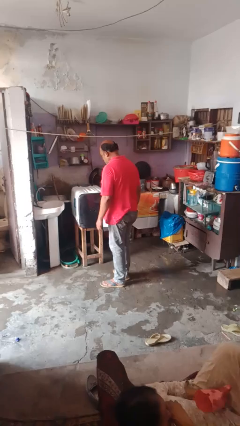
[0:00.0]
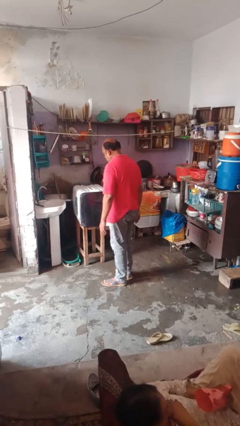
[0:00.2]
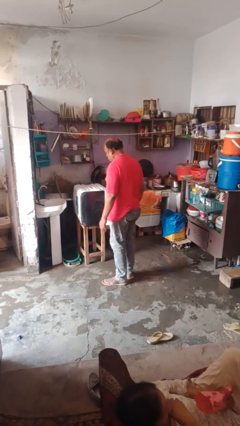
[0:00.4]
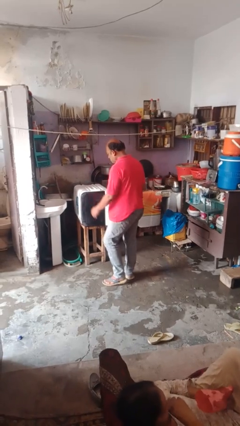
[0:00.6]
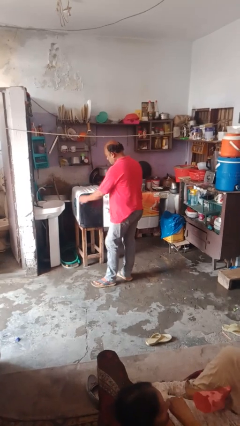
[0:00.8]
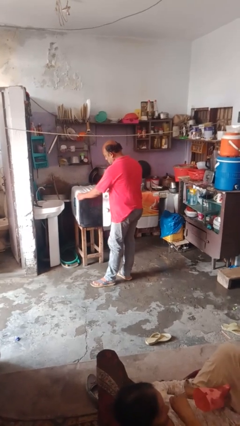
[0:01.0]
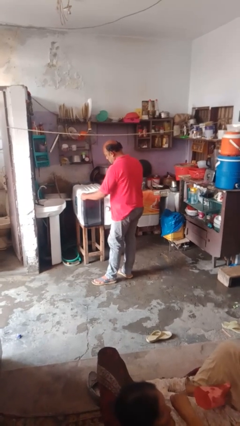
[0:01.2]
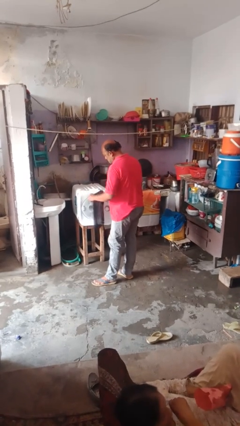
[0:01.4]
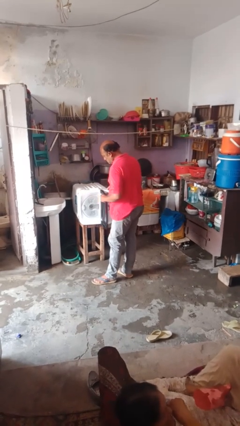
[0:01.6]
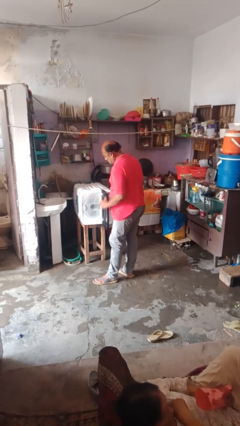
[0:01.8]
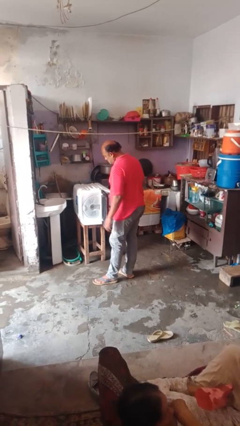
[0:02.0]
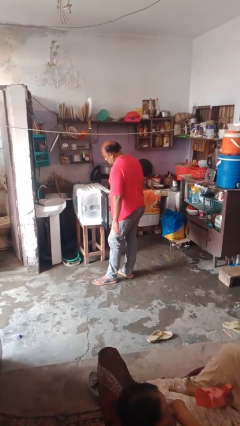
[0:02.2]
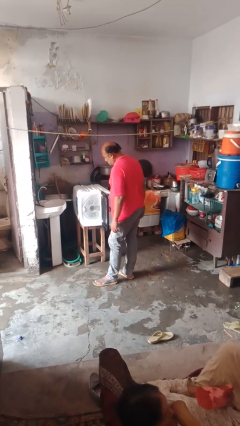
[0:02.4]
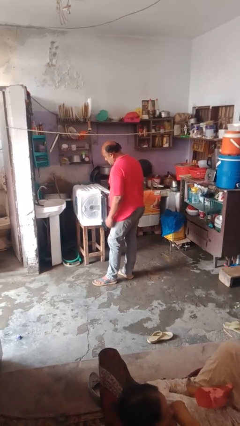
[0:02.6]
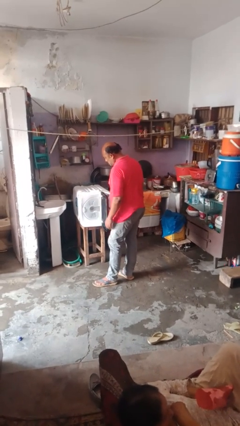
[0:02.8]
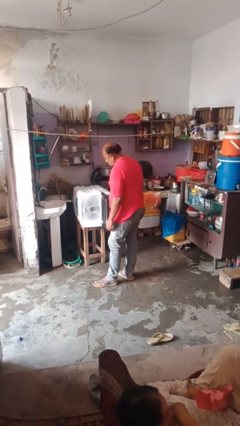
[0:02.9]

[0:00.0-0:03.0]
person opens dishwasher

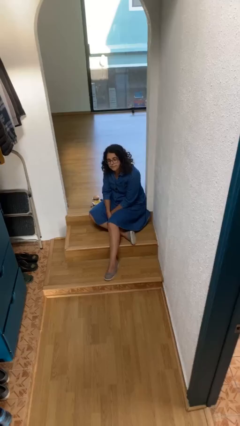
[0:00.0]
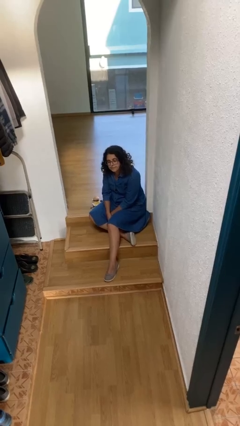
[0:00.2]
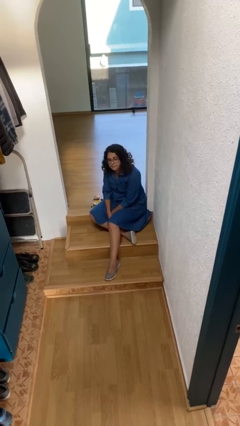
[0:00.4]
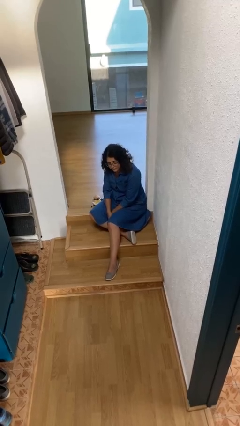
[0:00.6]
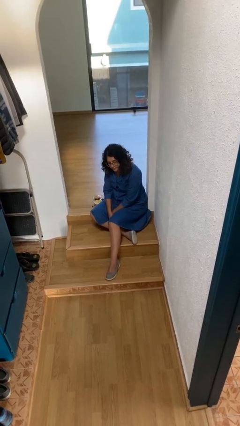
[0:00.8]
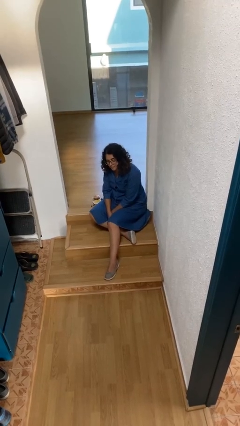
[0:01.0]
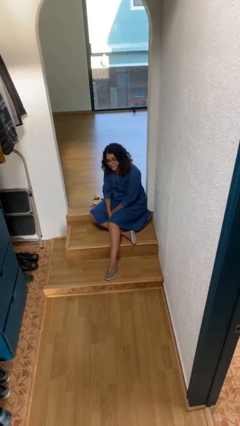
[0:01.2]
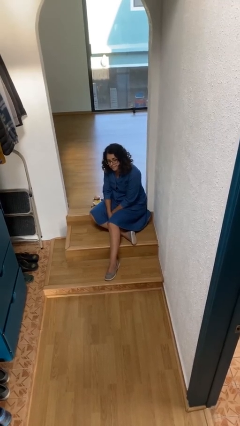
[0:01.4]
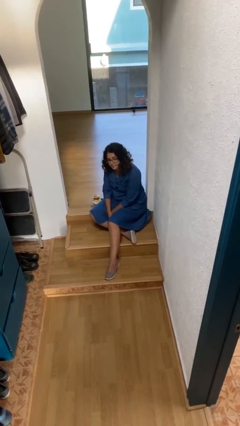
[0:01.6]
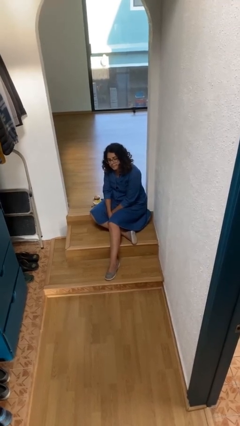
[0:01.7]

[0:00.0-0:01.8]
person nods head

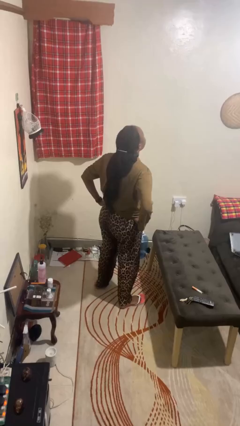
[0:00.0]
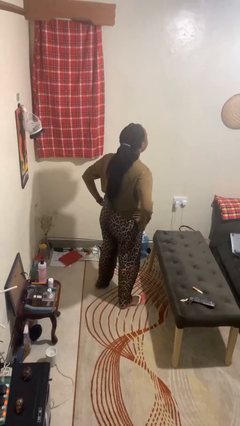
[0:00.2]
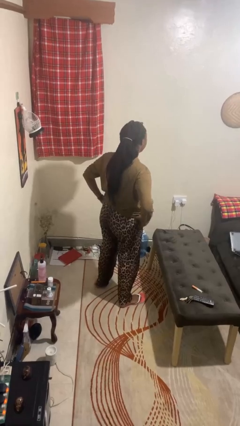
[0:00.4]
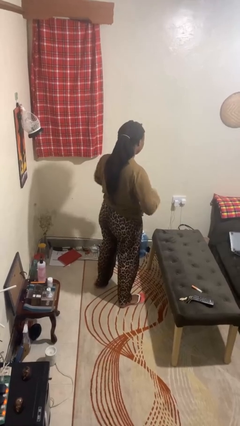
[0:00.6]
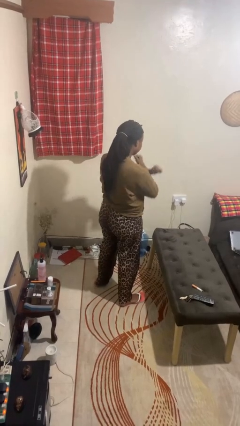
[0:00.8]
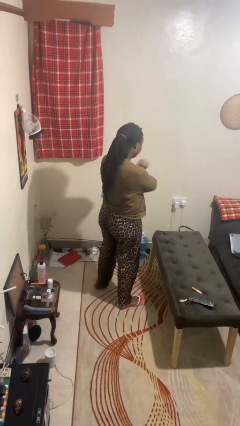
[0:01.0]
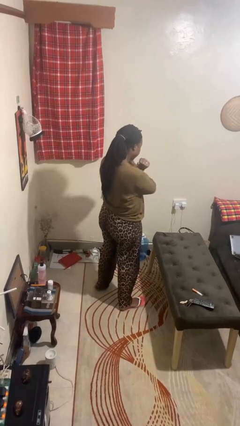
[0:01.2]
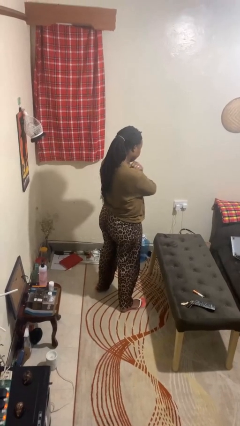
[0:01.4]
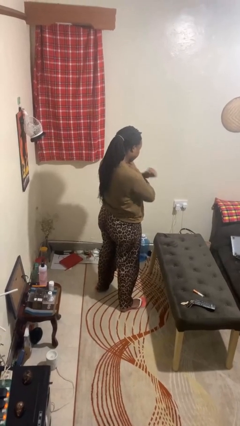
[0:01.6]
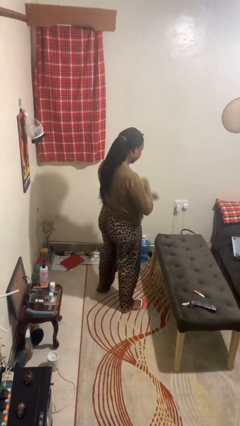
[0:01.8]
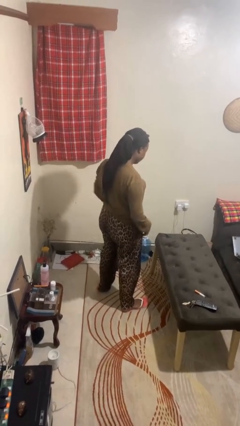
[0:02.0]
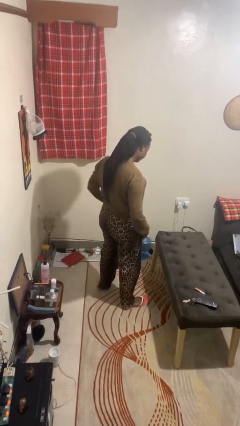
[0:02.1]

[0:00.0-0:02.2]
person gestures arms x

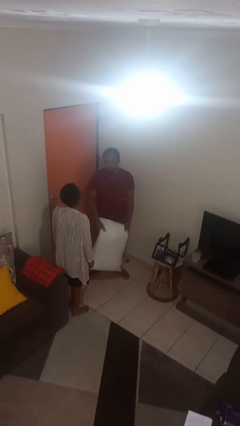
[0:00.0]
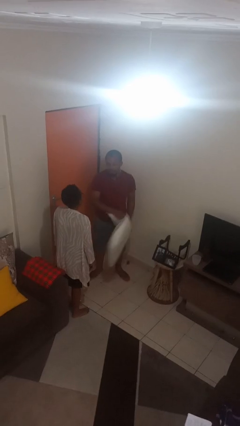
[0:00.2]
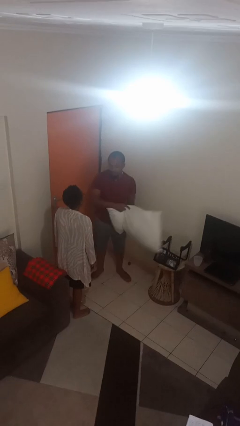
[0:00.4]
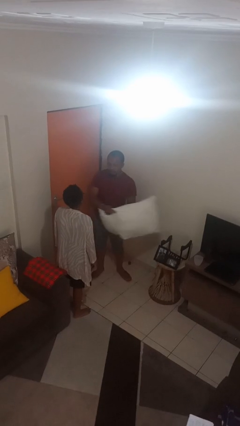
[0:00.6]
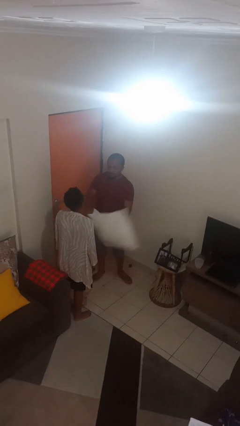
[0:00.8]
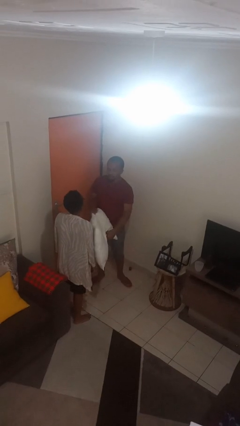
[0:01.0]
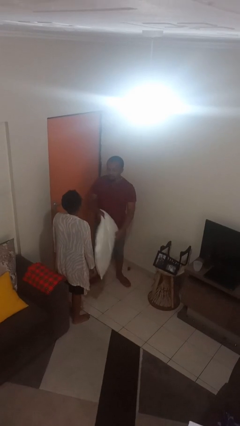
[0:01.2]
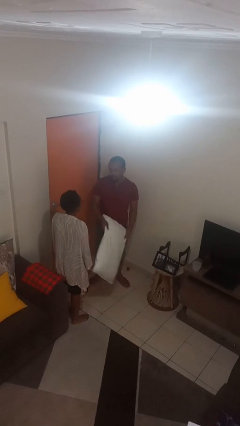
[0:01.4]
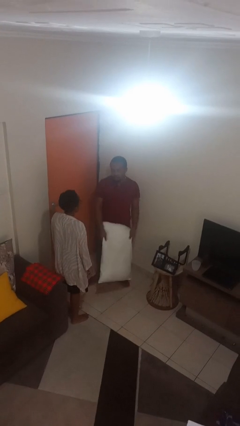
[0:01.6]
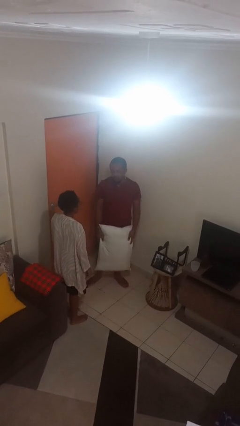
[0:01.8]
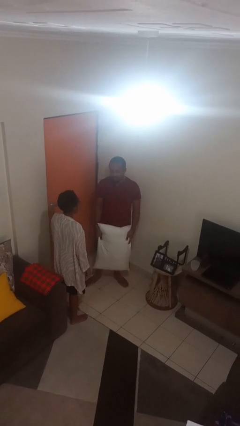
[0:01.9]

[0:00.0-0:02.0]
person hits person with pillow

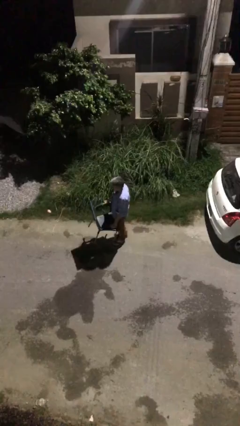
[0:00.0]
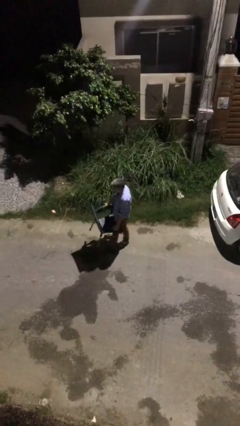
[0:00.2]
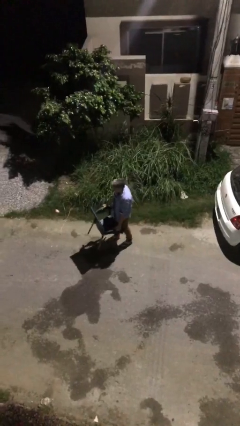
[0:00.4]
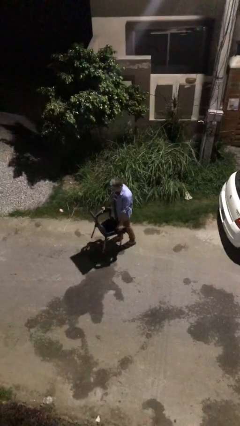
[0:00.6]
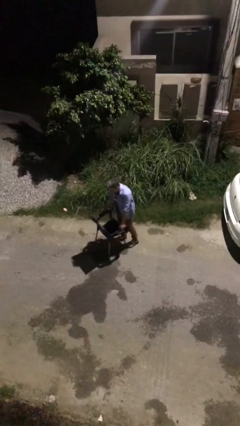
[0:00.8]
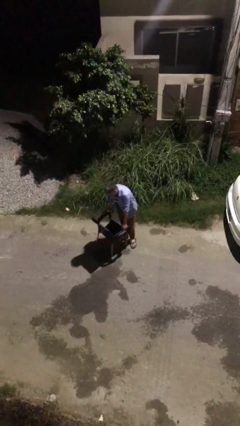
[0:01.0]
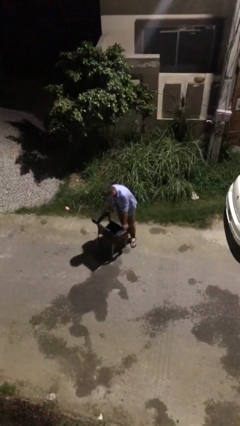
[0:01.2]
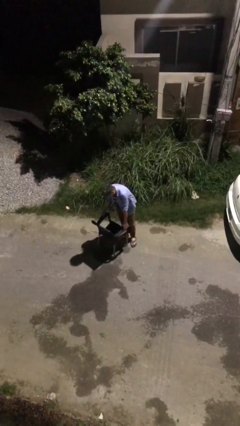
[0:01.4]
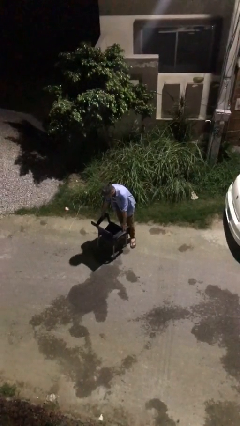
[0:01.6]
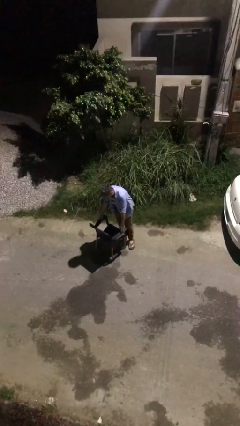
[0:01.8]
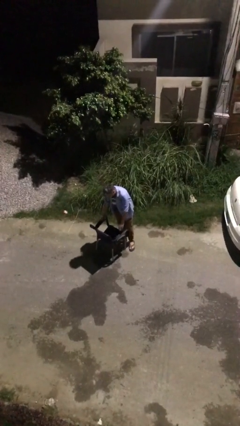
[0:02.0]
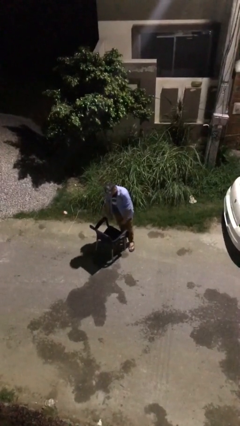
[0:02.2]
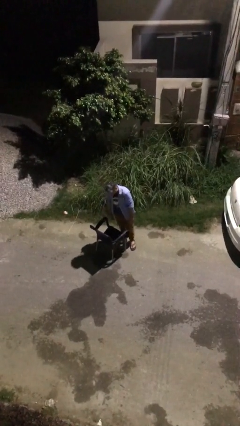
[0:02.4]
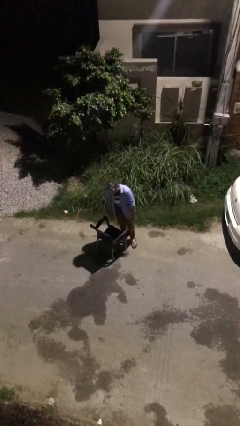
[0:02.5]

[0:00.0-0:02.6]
person puts down object on floor

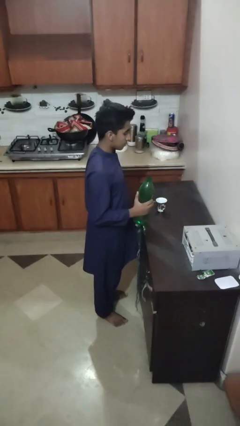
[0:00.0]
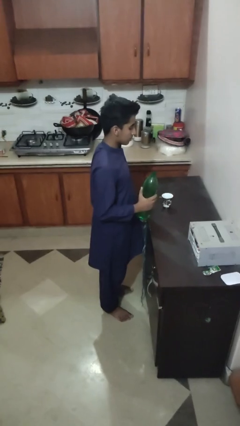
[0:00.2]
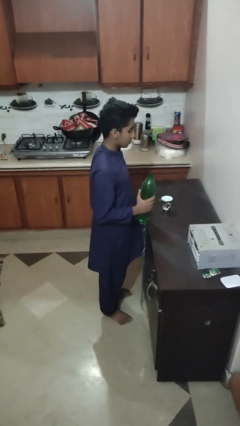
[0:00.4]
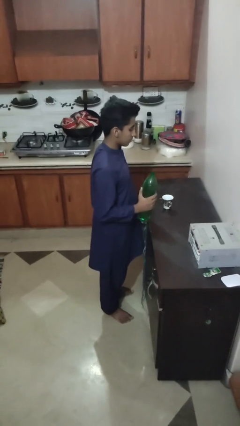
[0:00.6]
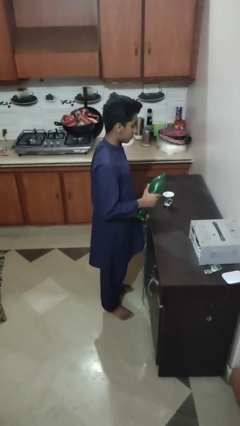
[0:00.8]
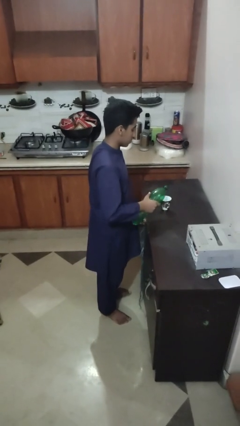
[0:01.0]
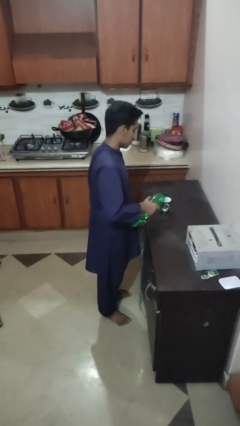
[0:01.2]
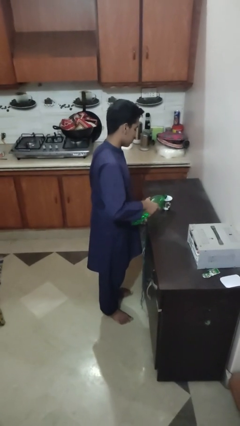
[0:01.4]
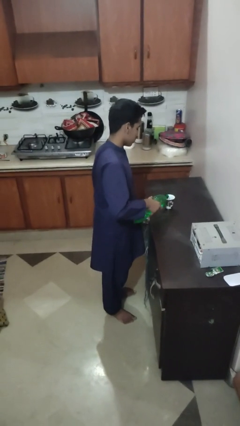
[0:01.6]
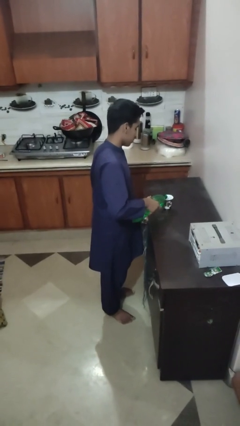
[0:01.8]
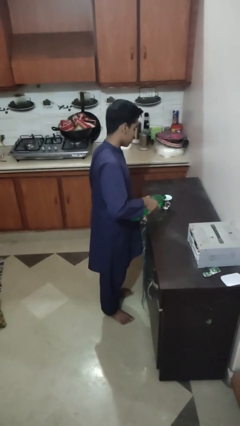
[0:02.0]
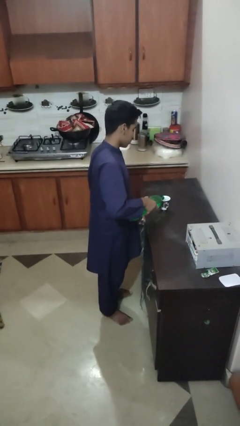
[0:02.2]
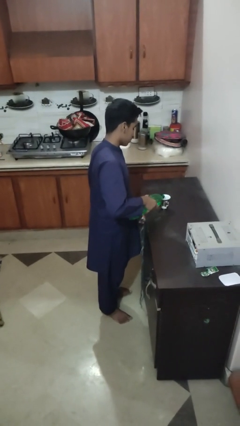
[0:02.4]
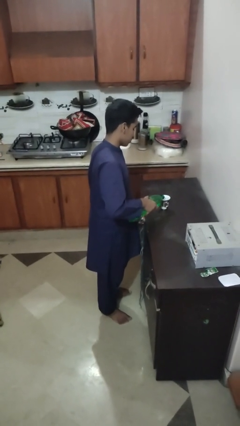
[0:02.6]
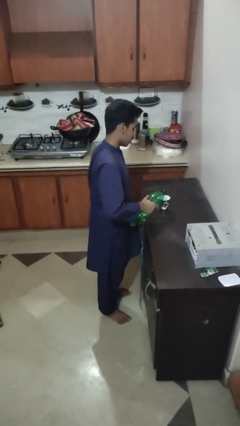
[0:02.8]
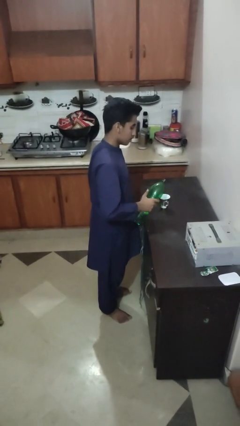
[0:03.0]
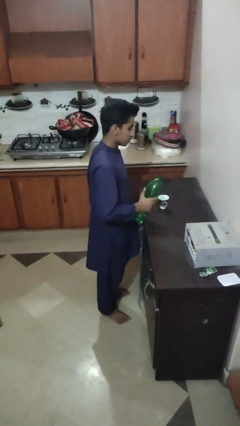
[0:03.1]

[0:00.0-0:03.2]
person pours liquid into cup

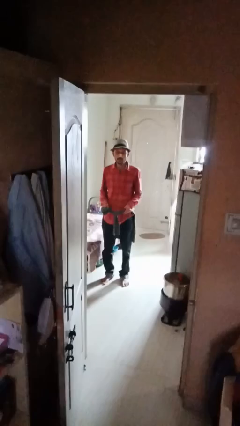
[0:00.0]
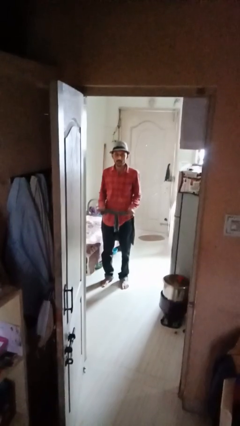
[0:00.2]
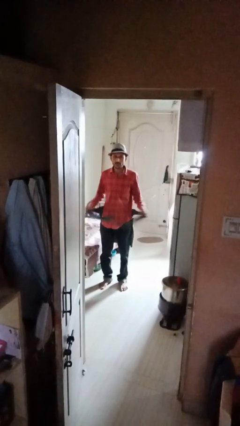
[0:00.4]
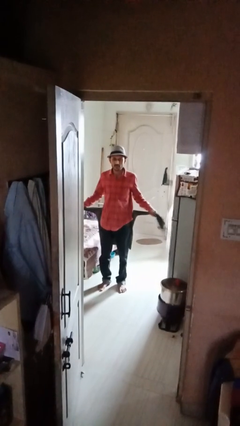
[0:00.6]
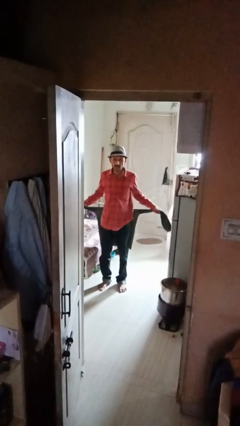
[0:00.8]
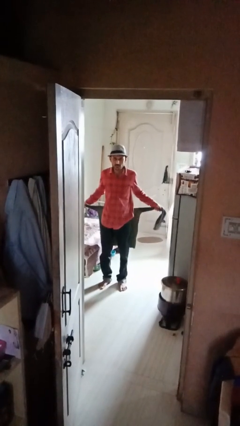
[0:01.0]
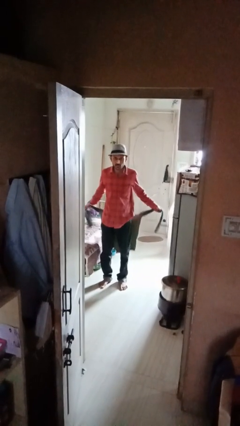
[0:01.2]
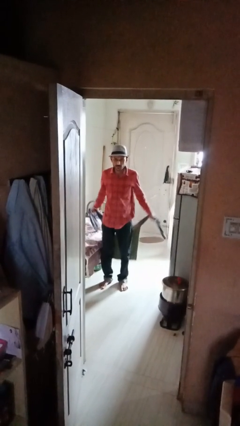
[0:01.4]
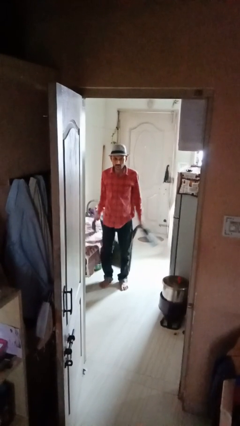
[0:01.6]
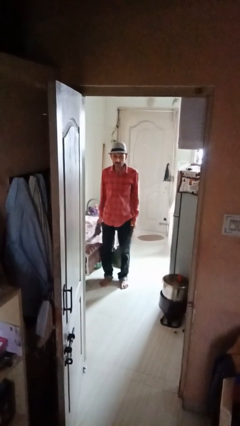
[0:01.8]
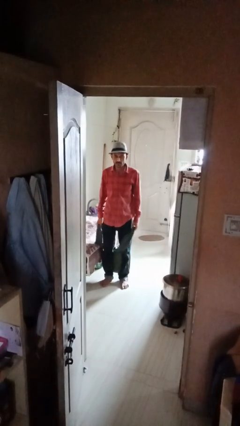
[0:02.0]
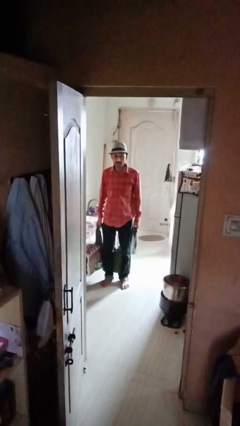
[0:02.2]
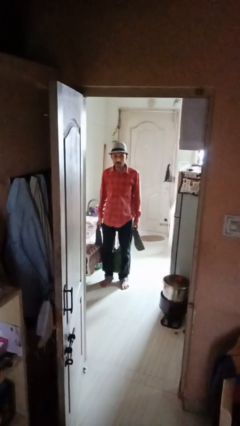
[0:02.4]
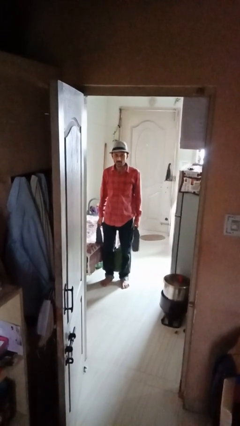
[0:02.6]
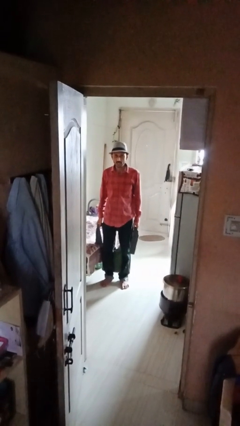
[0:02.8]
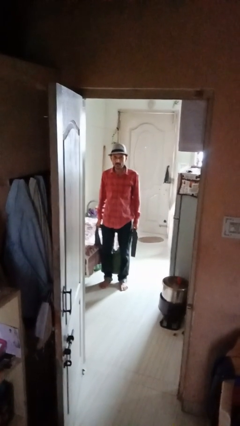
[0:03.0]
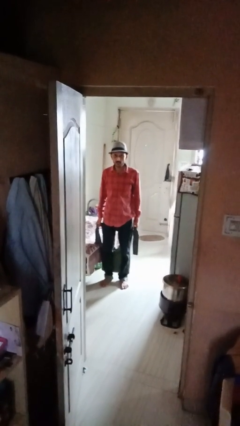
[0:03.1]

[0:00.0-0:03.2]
person unties jacket around waist
